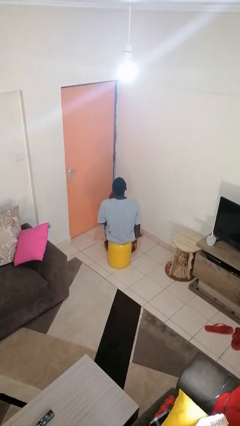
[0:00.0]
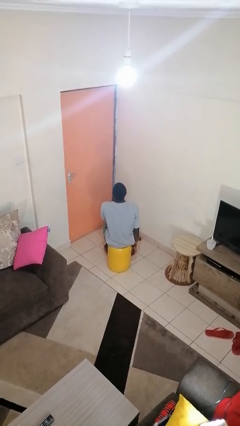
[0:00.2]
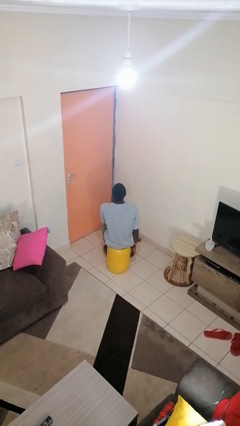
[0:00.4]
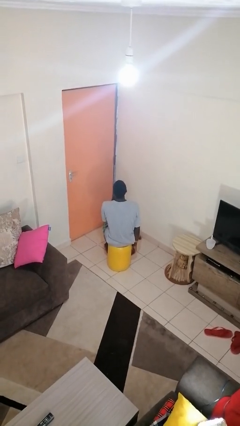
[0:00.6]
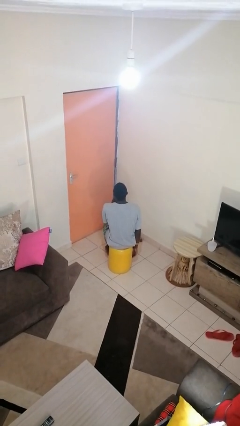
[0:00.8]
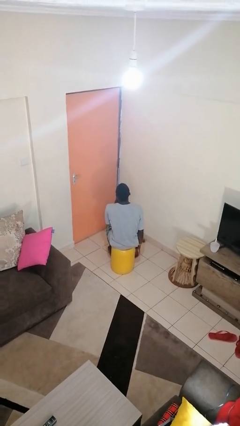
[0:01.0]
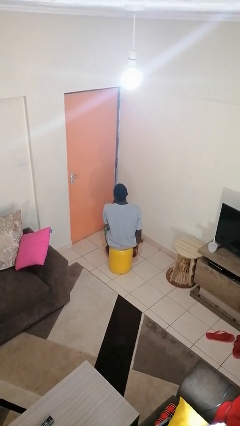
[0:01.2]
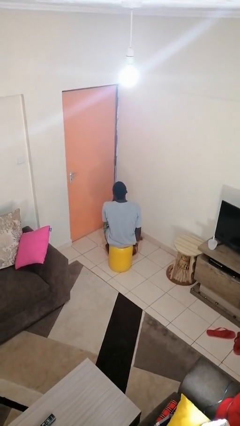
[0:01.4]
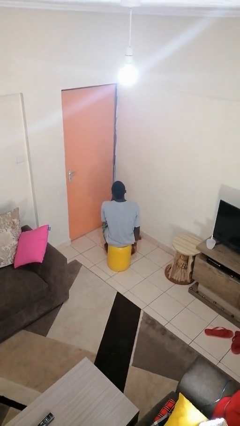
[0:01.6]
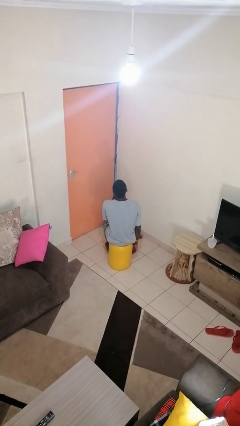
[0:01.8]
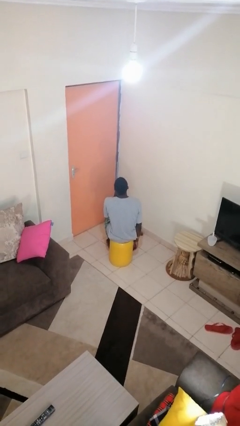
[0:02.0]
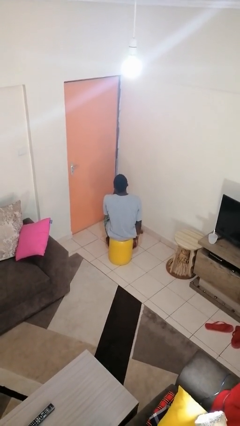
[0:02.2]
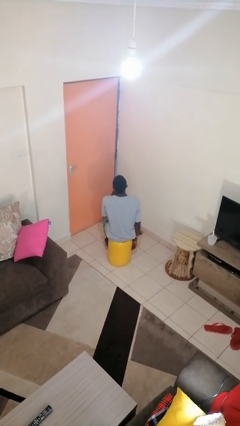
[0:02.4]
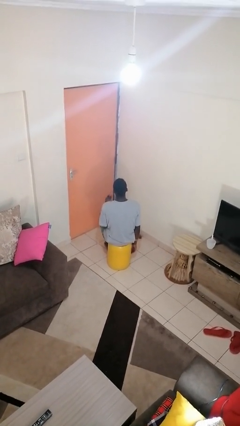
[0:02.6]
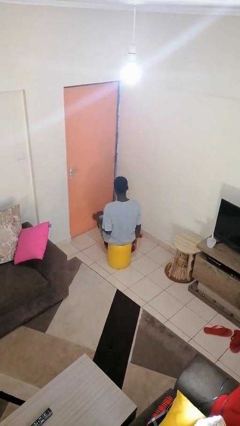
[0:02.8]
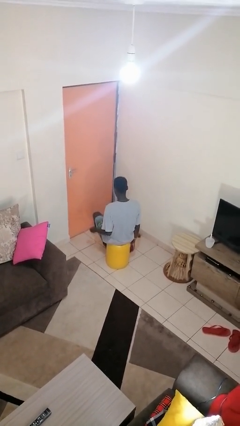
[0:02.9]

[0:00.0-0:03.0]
person strokes chin

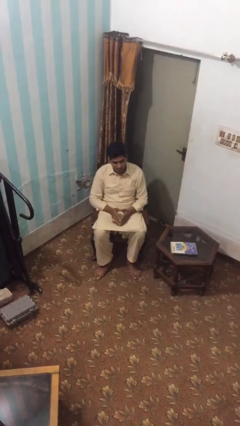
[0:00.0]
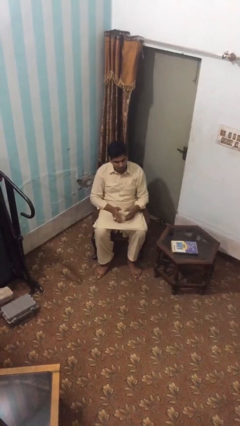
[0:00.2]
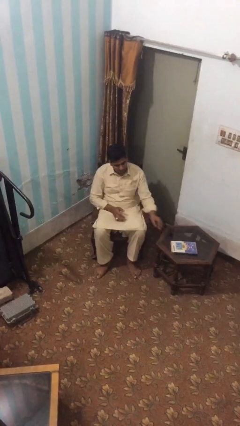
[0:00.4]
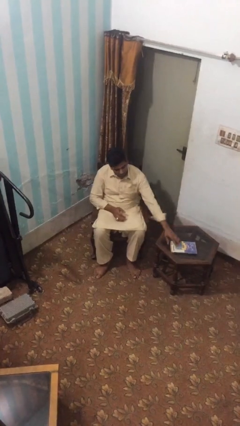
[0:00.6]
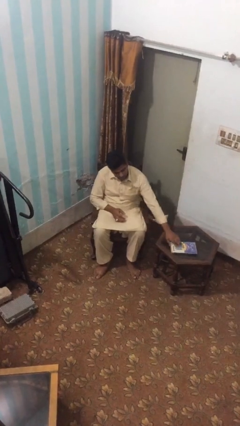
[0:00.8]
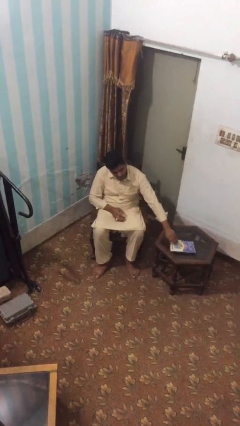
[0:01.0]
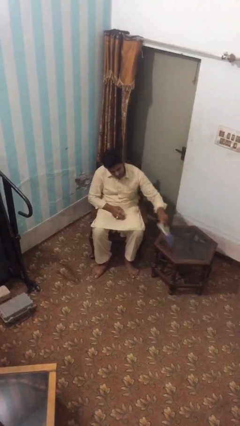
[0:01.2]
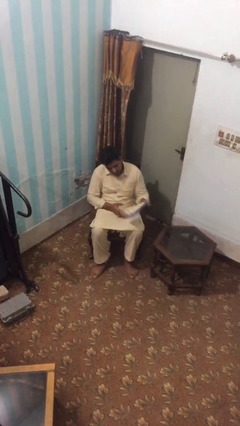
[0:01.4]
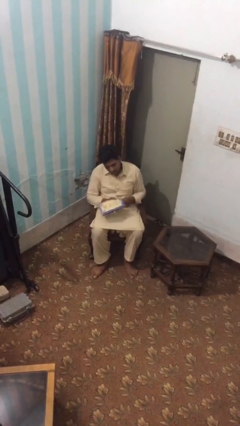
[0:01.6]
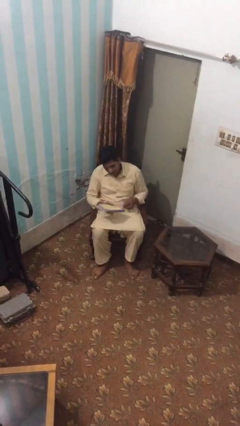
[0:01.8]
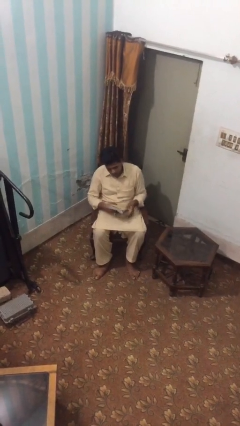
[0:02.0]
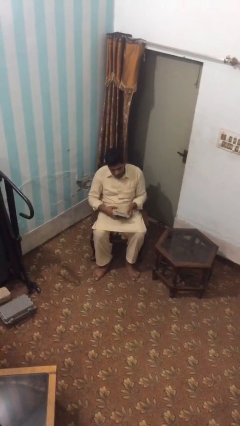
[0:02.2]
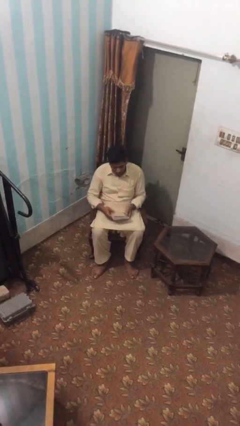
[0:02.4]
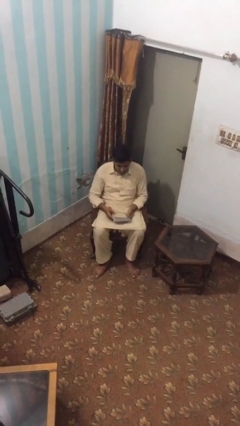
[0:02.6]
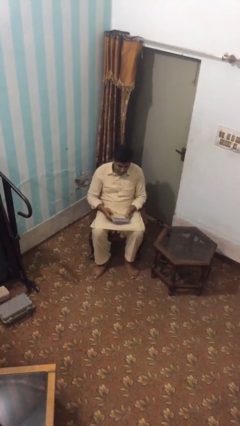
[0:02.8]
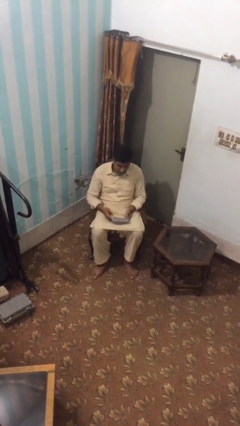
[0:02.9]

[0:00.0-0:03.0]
person picks up object from table

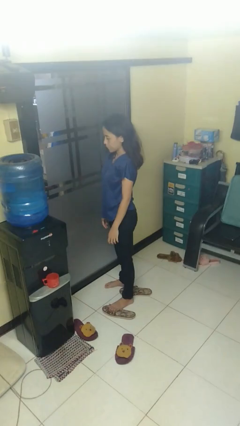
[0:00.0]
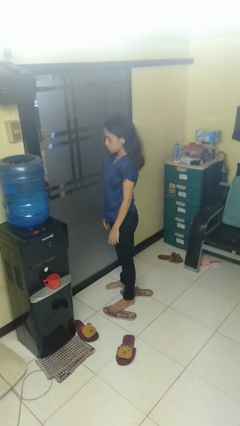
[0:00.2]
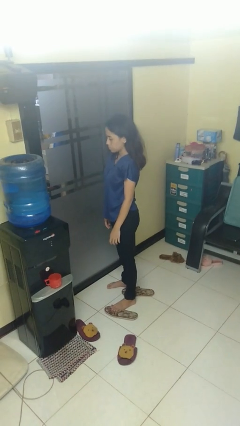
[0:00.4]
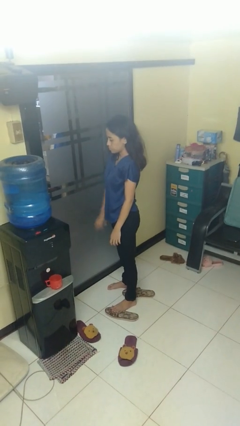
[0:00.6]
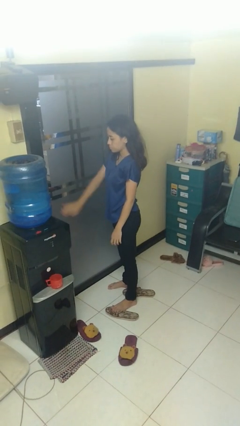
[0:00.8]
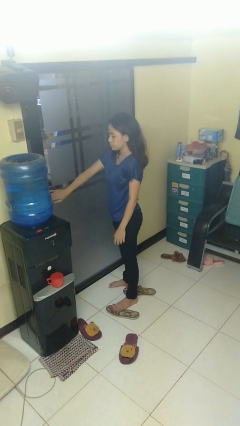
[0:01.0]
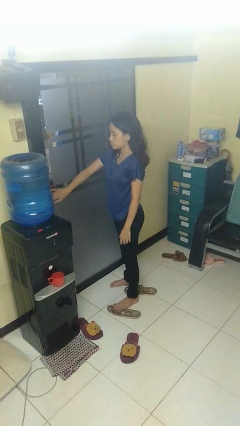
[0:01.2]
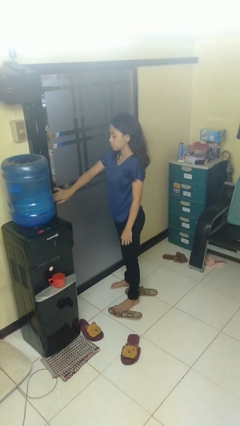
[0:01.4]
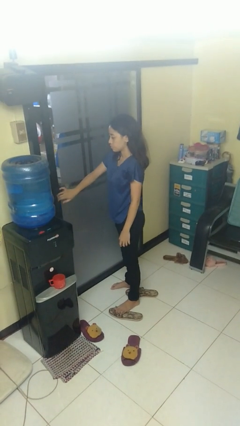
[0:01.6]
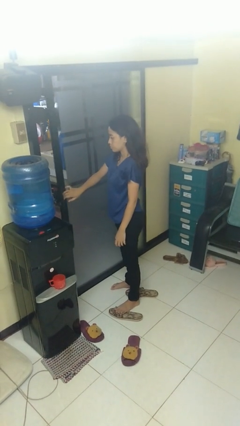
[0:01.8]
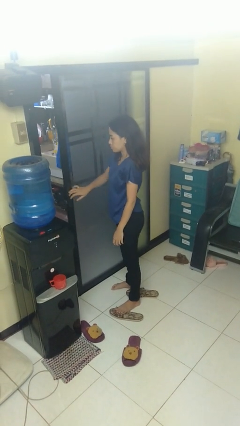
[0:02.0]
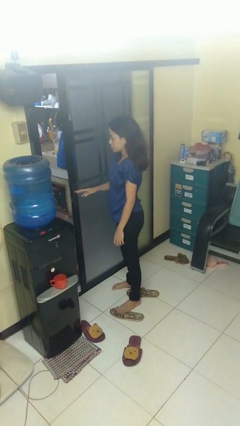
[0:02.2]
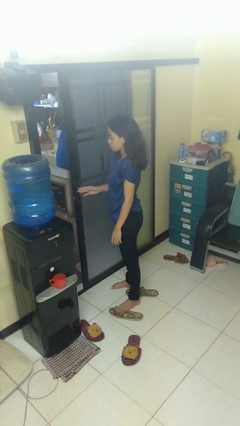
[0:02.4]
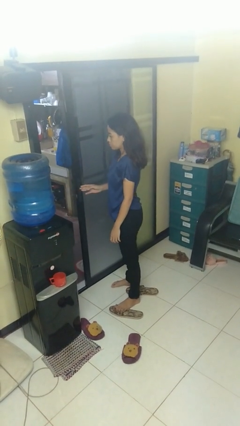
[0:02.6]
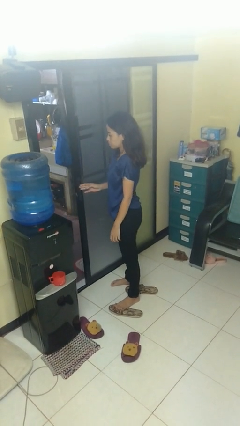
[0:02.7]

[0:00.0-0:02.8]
person opens sliding door

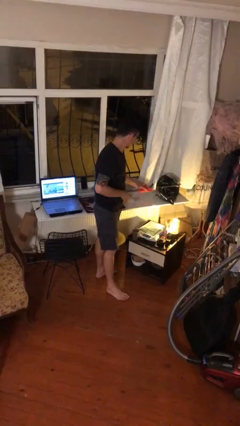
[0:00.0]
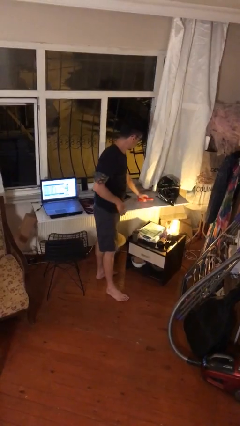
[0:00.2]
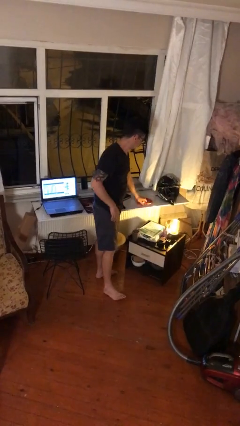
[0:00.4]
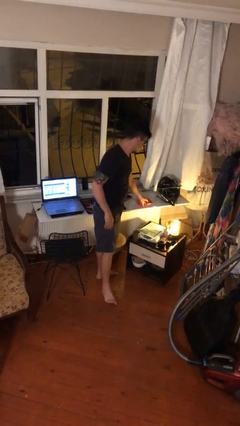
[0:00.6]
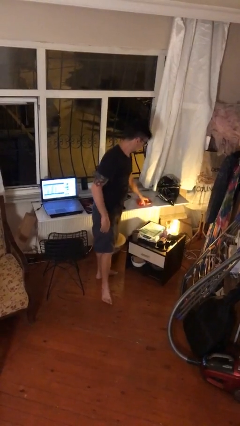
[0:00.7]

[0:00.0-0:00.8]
person puts down object on table

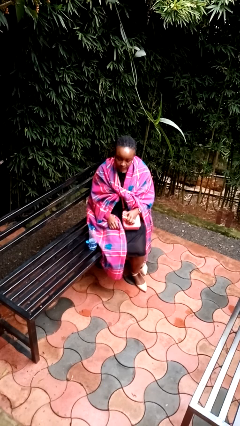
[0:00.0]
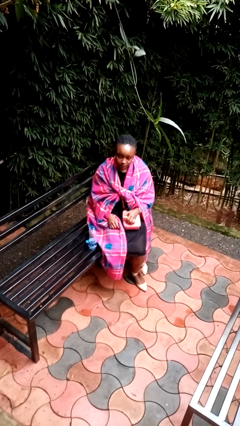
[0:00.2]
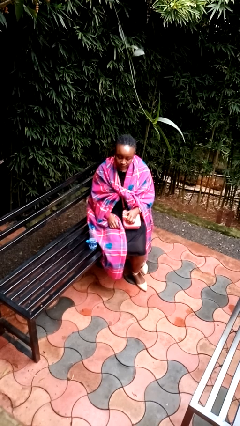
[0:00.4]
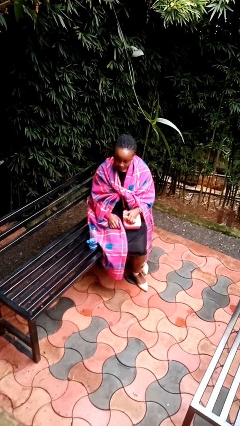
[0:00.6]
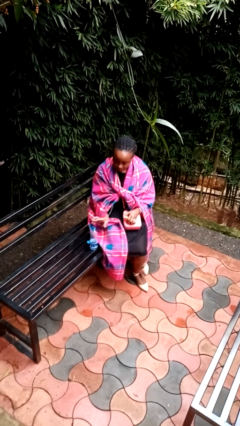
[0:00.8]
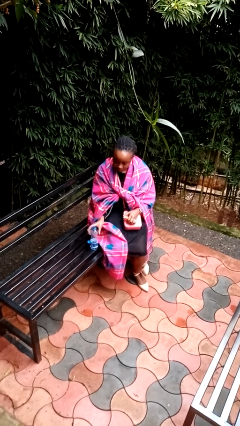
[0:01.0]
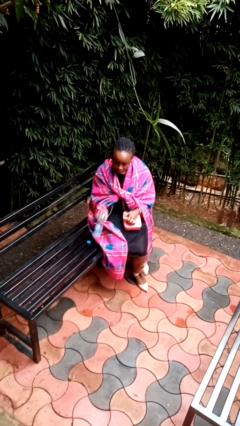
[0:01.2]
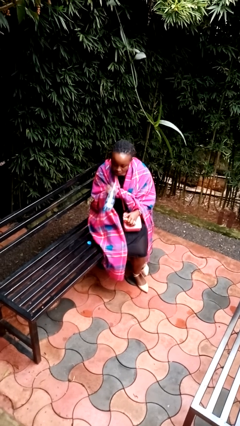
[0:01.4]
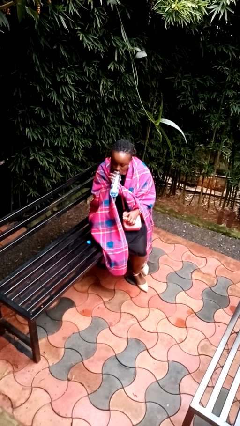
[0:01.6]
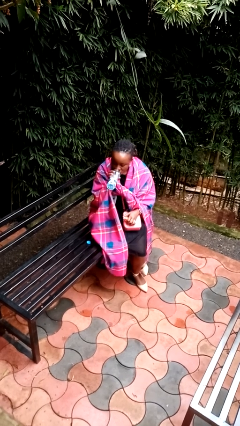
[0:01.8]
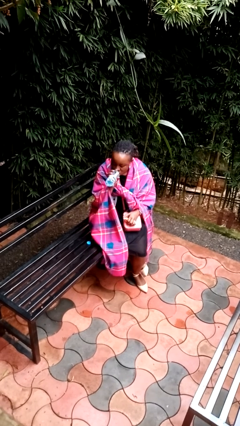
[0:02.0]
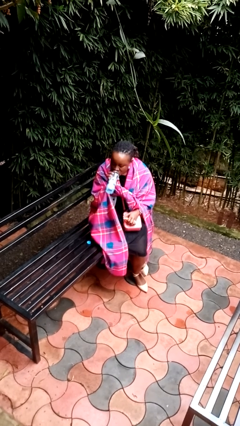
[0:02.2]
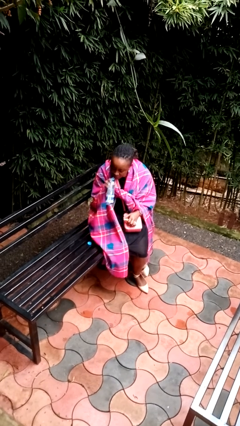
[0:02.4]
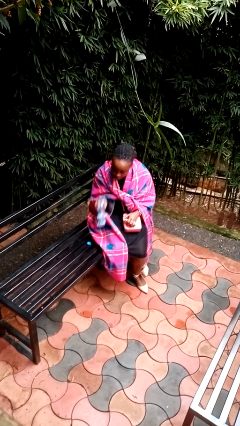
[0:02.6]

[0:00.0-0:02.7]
person drinks from cup

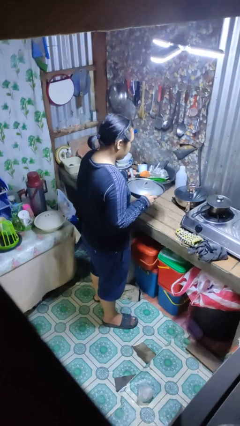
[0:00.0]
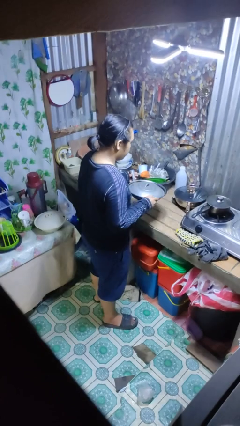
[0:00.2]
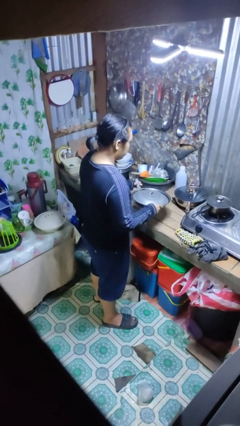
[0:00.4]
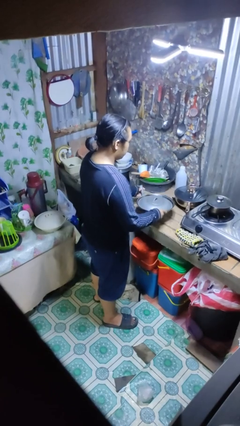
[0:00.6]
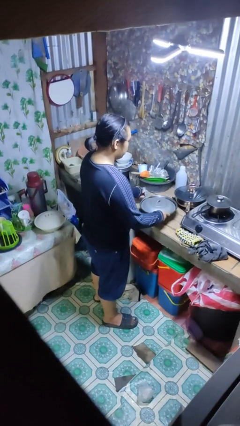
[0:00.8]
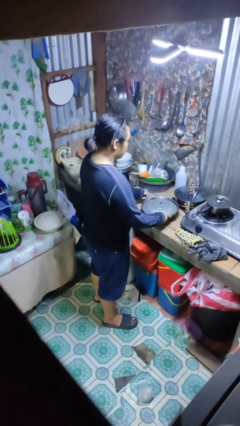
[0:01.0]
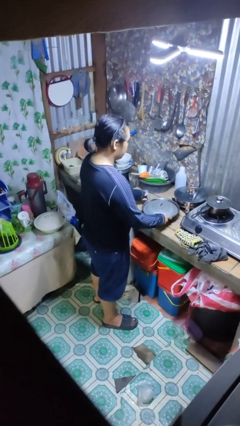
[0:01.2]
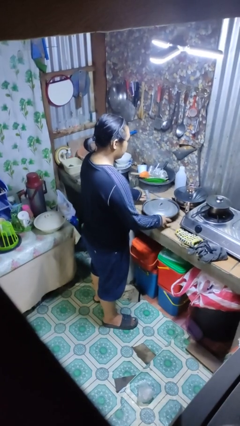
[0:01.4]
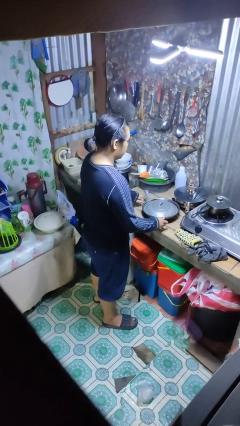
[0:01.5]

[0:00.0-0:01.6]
person puts down object on countertop

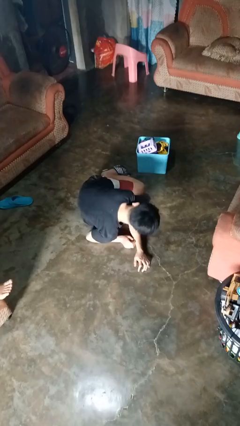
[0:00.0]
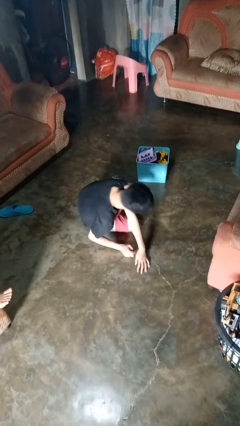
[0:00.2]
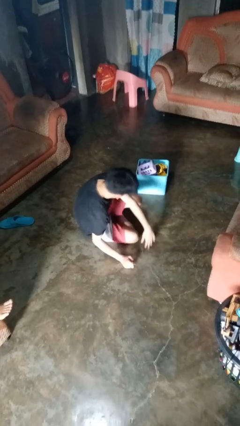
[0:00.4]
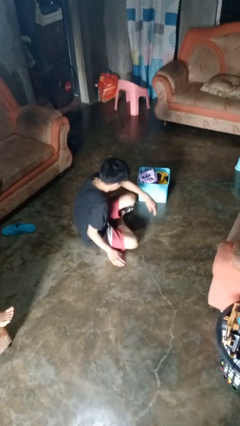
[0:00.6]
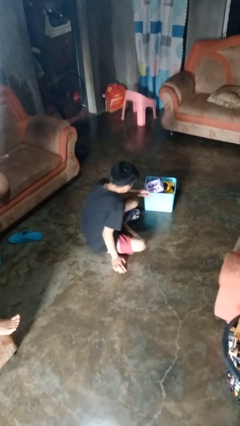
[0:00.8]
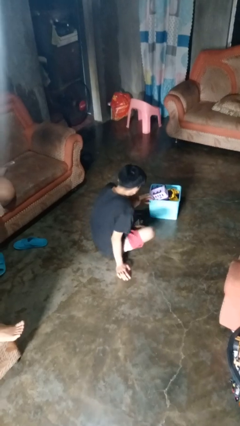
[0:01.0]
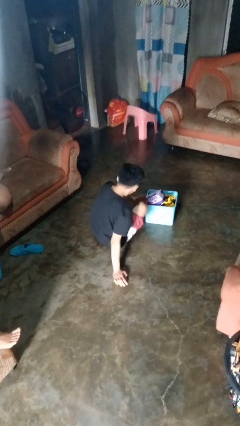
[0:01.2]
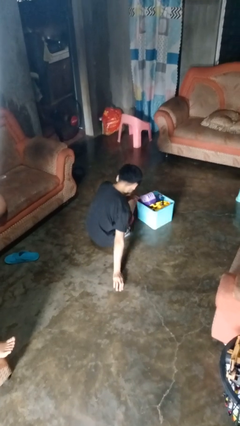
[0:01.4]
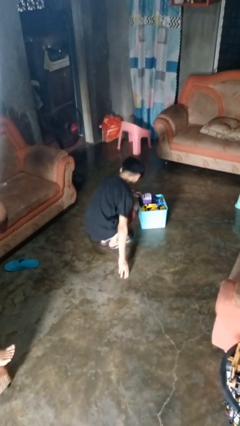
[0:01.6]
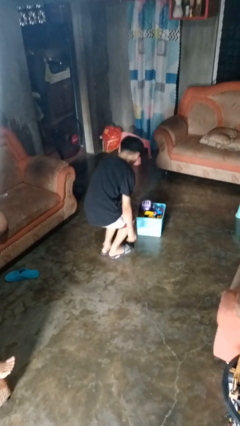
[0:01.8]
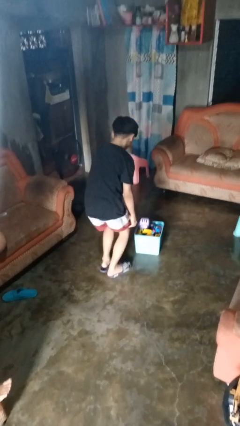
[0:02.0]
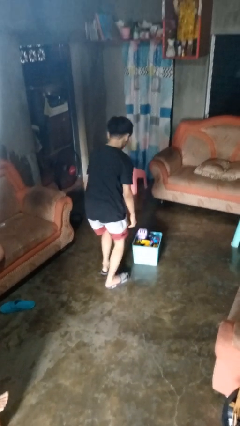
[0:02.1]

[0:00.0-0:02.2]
person stands up from floor

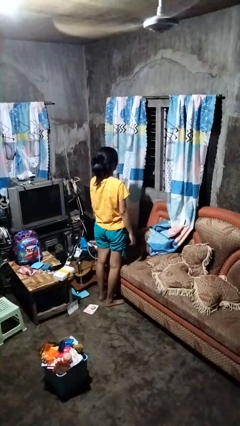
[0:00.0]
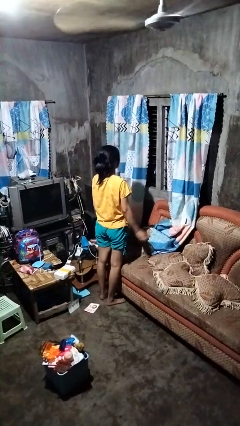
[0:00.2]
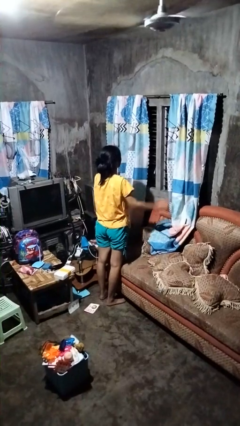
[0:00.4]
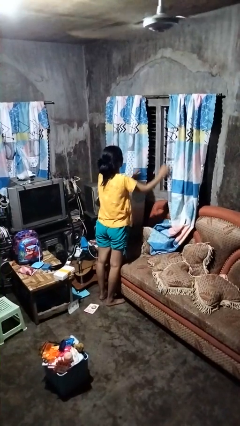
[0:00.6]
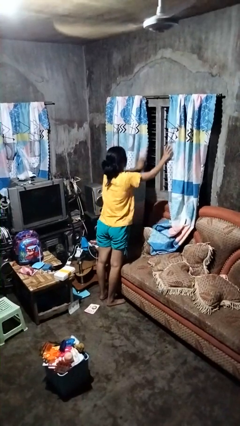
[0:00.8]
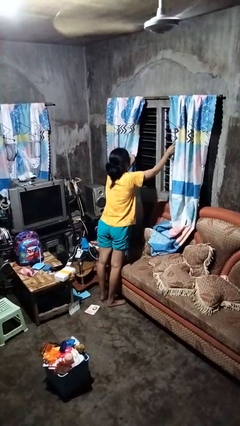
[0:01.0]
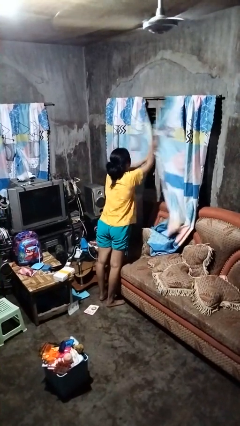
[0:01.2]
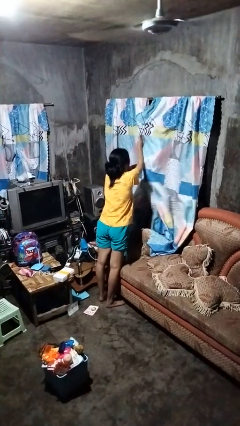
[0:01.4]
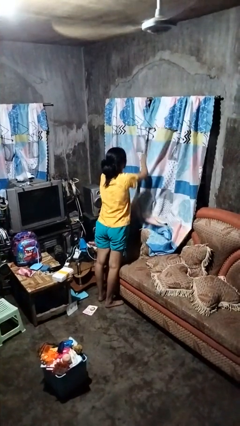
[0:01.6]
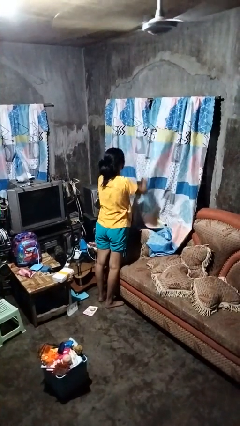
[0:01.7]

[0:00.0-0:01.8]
person closes curtains
